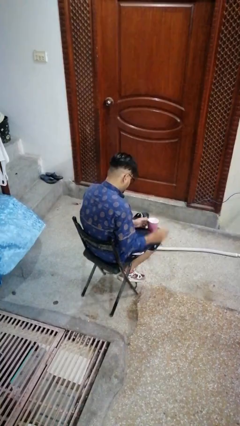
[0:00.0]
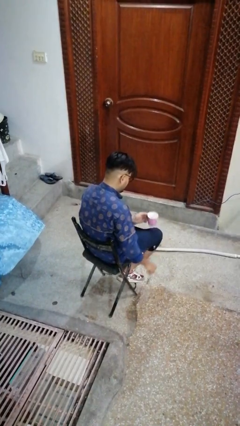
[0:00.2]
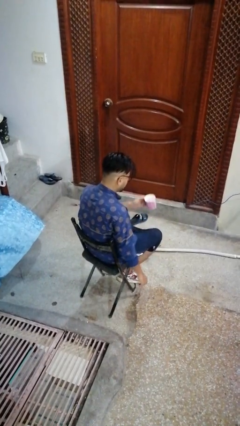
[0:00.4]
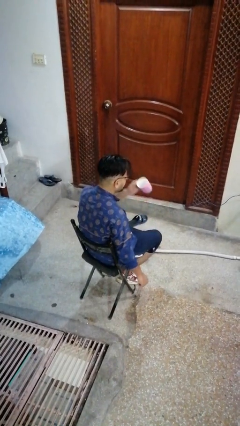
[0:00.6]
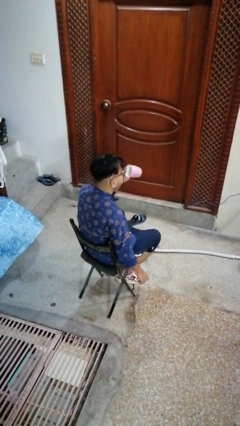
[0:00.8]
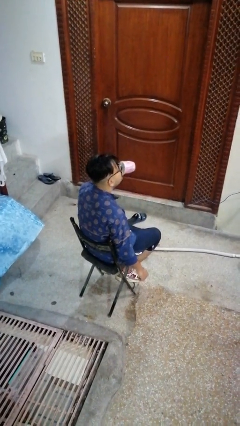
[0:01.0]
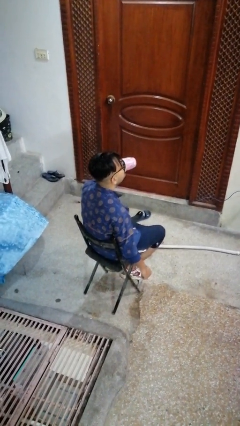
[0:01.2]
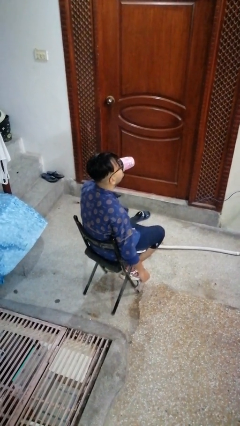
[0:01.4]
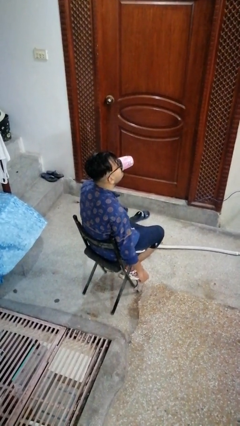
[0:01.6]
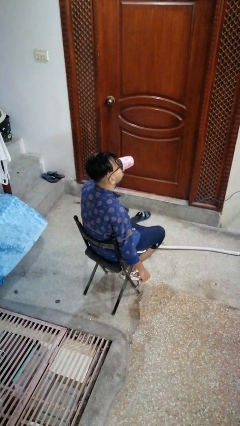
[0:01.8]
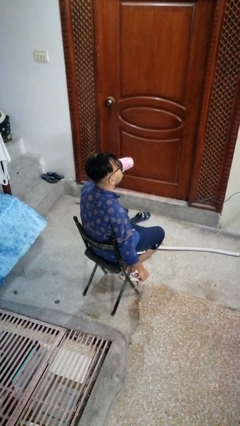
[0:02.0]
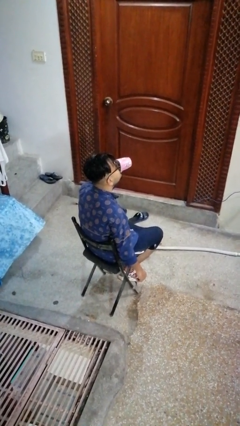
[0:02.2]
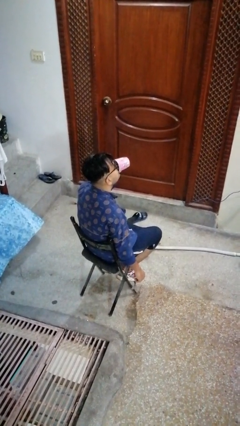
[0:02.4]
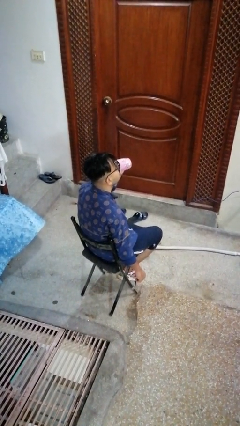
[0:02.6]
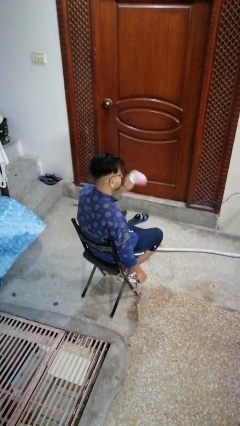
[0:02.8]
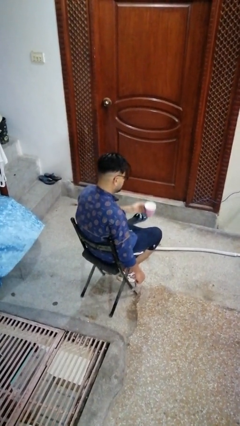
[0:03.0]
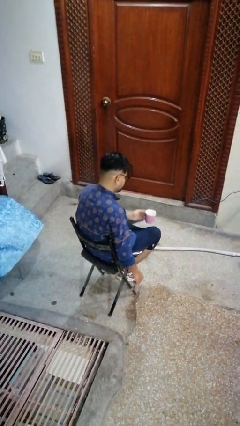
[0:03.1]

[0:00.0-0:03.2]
person drinks from mug

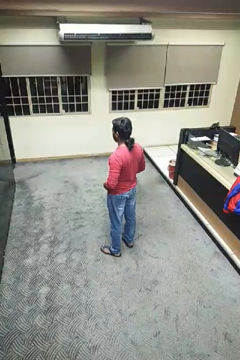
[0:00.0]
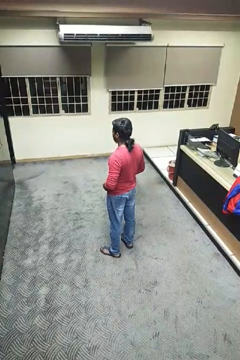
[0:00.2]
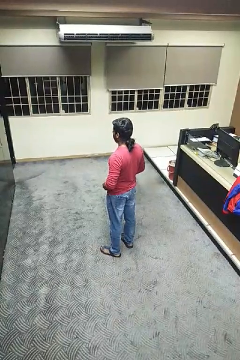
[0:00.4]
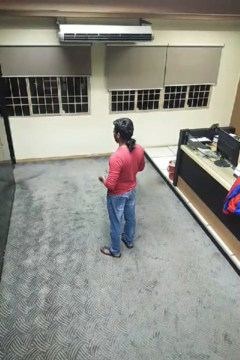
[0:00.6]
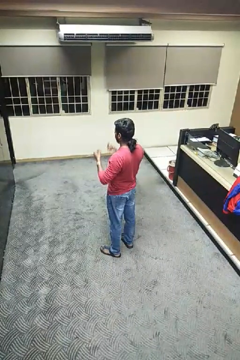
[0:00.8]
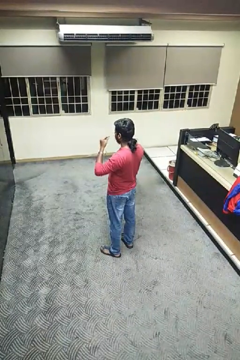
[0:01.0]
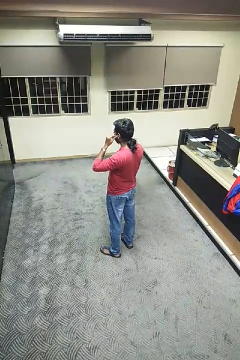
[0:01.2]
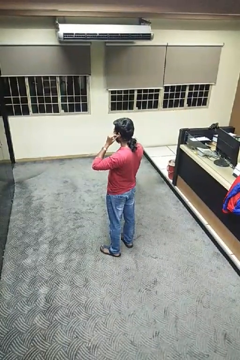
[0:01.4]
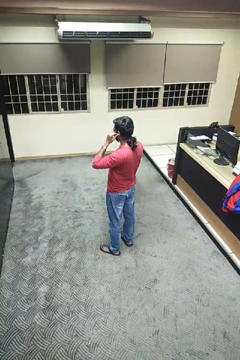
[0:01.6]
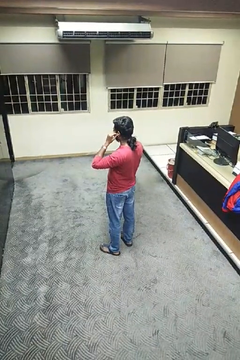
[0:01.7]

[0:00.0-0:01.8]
person puts on headphones

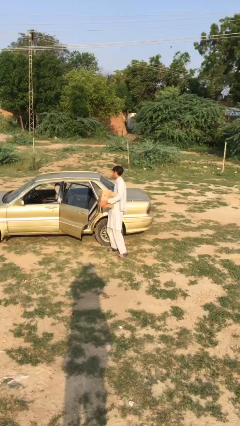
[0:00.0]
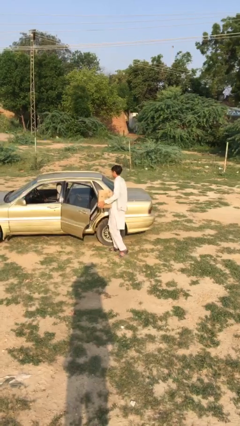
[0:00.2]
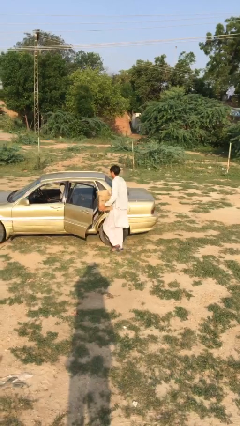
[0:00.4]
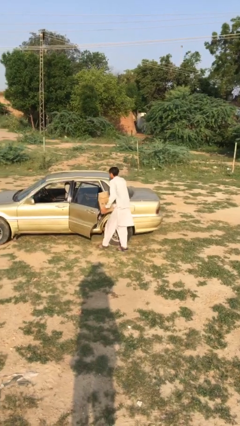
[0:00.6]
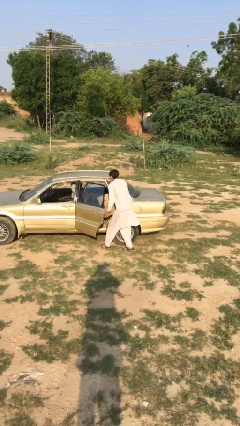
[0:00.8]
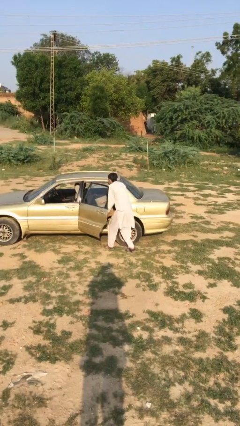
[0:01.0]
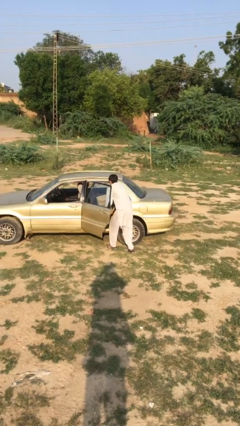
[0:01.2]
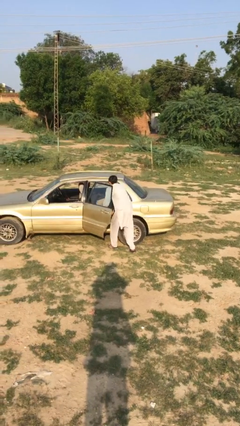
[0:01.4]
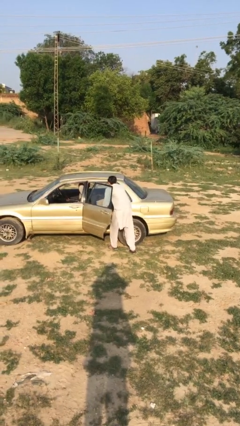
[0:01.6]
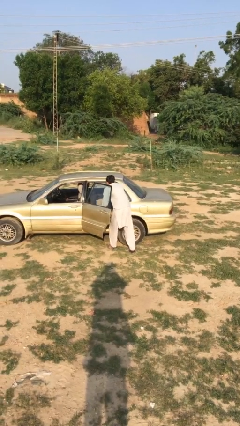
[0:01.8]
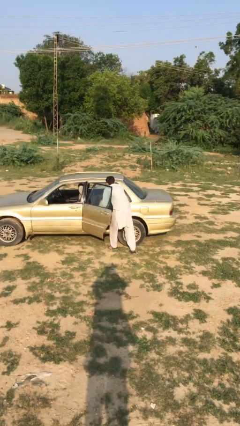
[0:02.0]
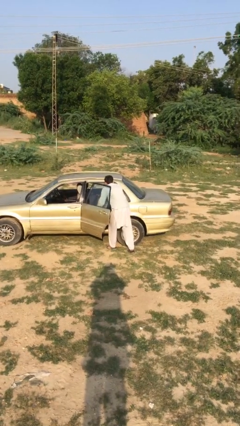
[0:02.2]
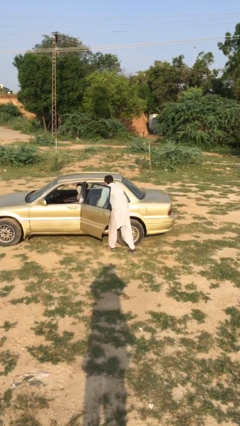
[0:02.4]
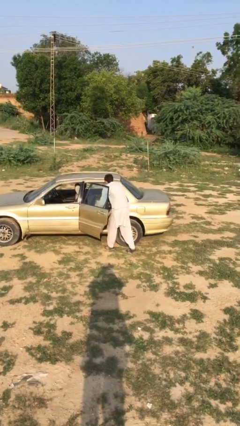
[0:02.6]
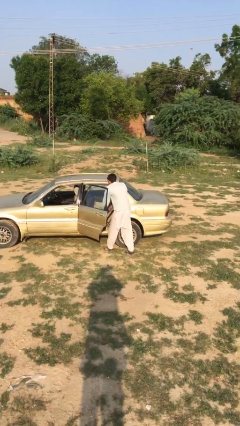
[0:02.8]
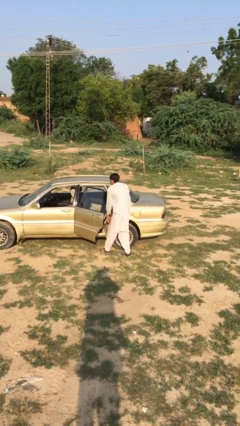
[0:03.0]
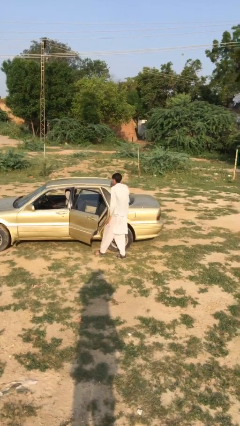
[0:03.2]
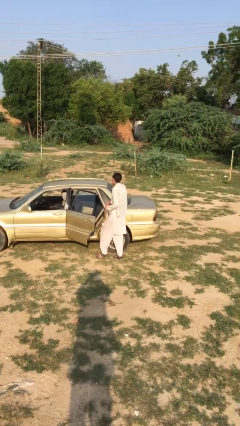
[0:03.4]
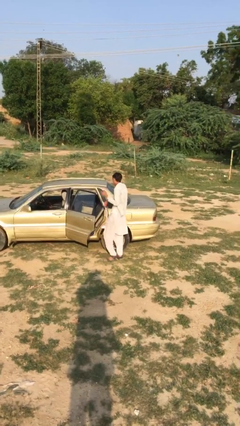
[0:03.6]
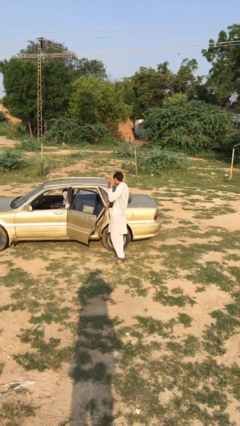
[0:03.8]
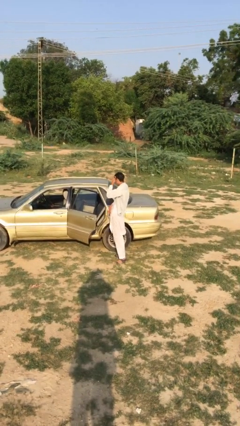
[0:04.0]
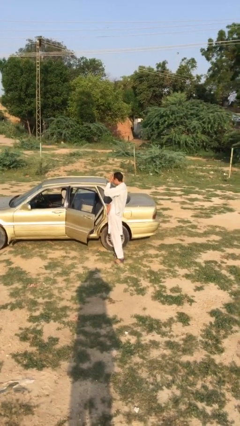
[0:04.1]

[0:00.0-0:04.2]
person loads car

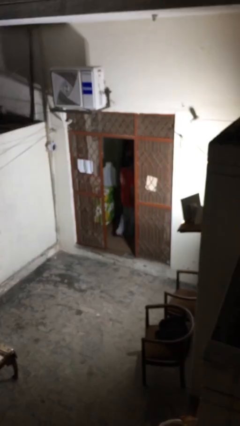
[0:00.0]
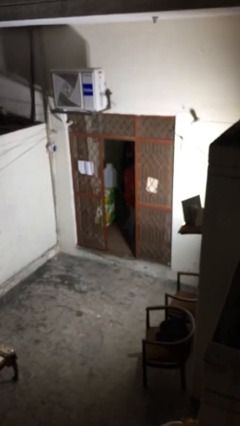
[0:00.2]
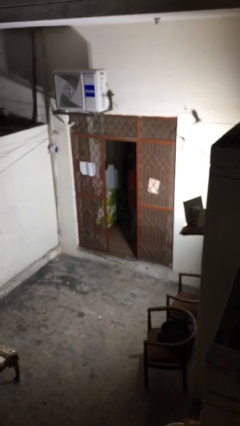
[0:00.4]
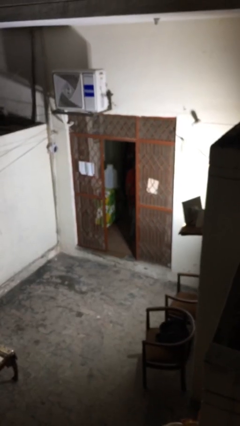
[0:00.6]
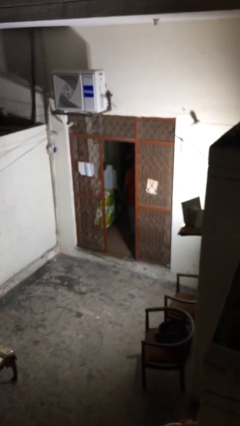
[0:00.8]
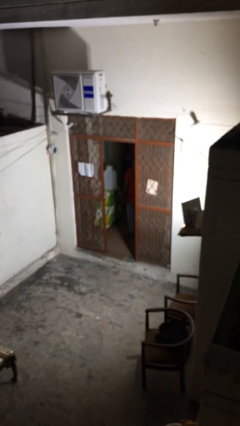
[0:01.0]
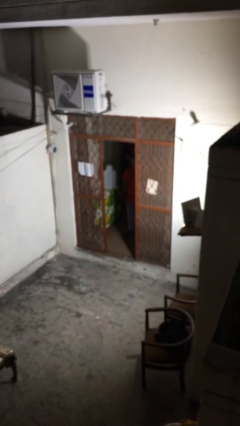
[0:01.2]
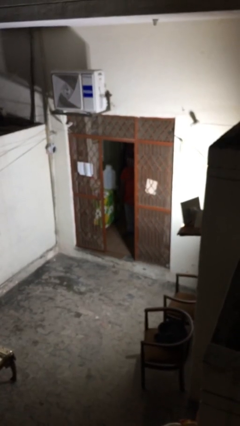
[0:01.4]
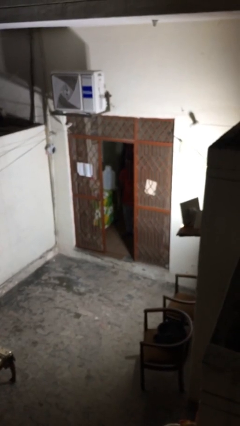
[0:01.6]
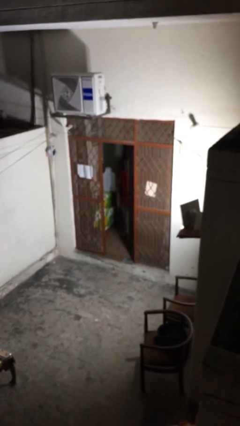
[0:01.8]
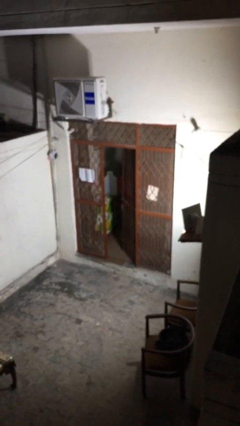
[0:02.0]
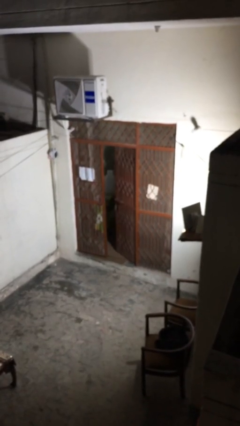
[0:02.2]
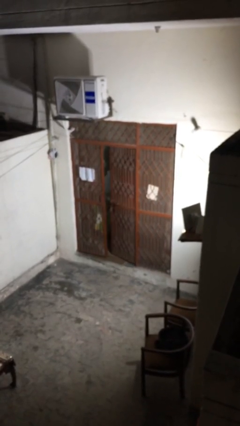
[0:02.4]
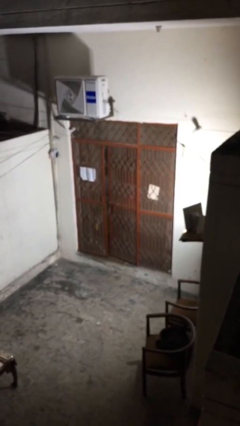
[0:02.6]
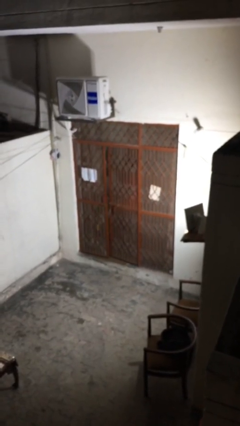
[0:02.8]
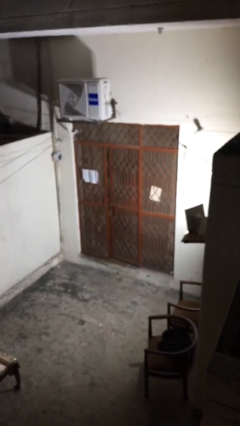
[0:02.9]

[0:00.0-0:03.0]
person closes facility door

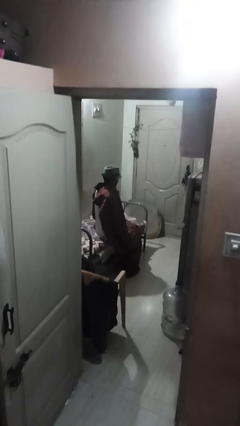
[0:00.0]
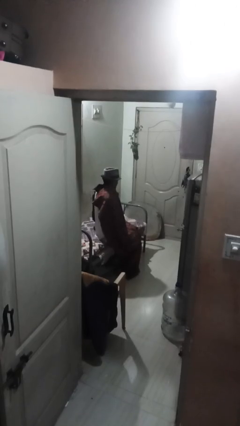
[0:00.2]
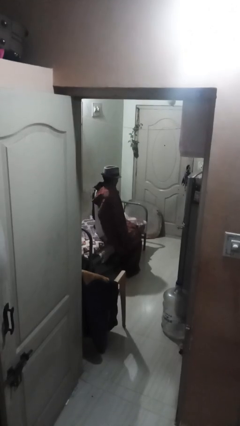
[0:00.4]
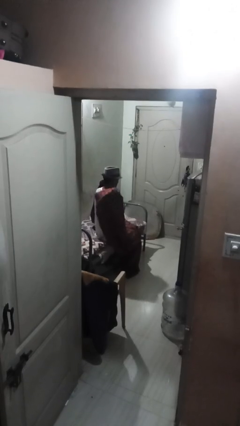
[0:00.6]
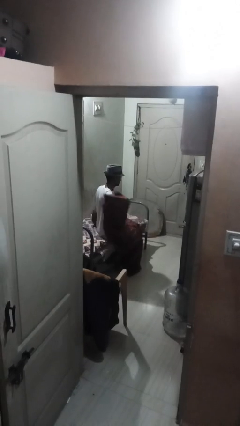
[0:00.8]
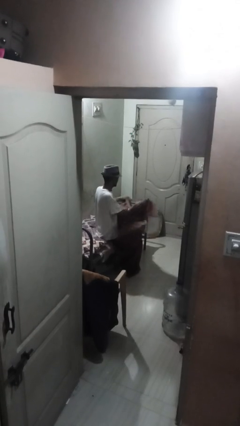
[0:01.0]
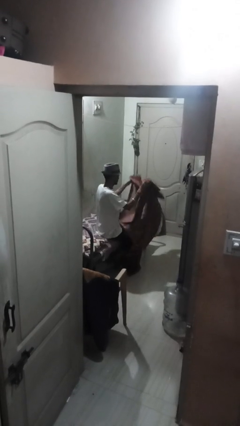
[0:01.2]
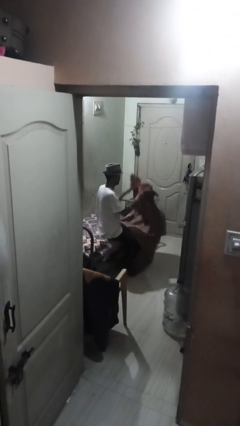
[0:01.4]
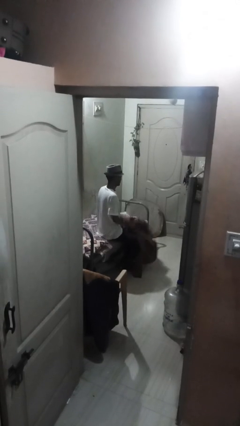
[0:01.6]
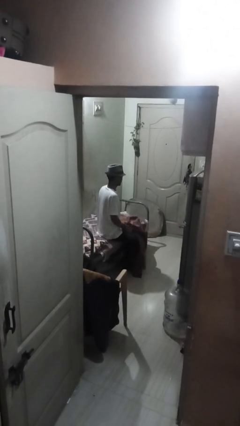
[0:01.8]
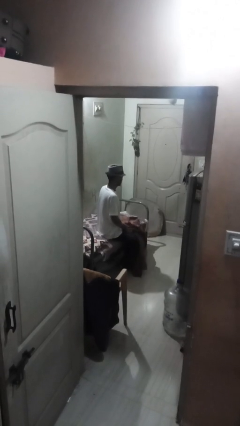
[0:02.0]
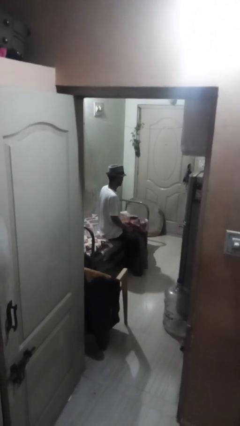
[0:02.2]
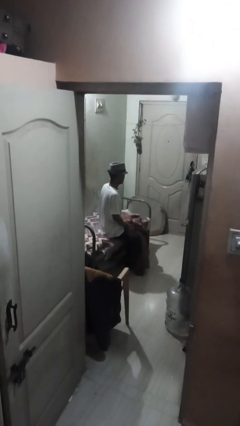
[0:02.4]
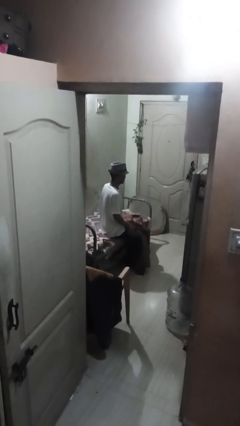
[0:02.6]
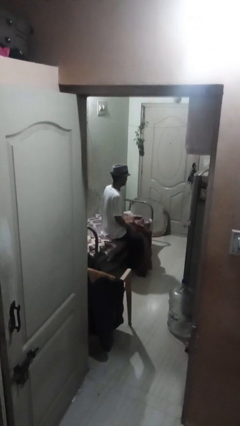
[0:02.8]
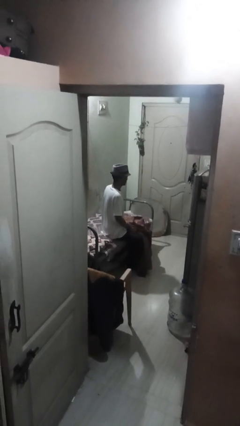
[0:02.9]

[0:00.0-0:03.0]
person uncovers with blanket

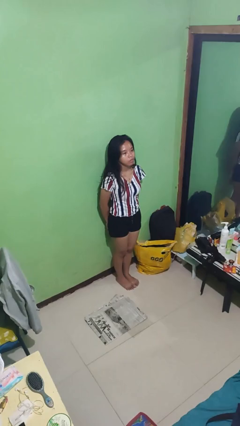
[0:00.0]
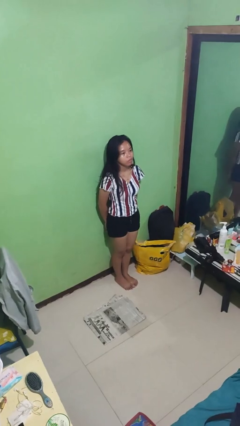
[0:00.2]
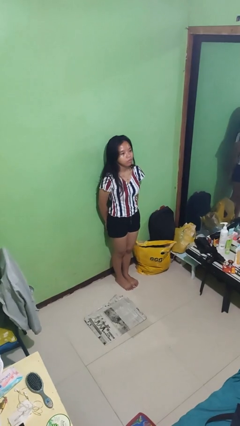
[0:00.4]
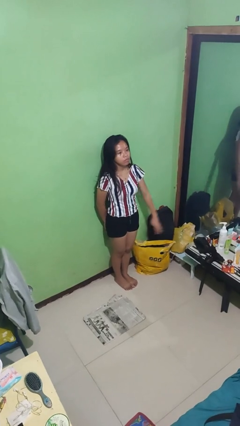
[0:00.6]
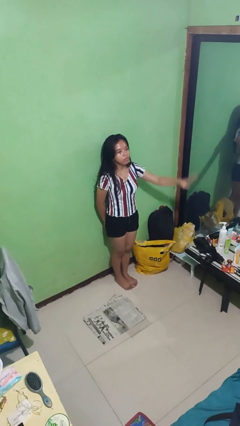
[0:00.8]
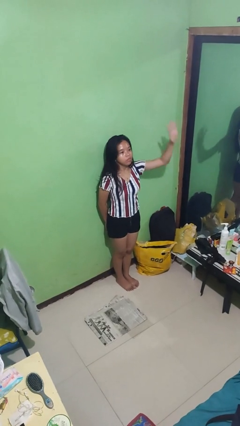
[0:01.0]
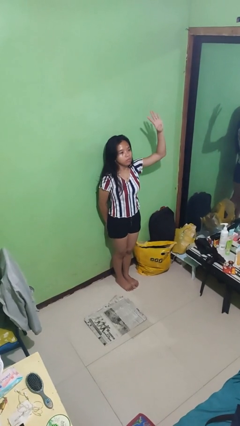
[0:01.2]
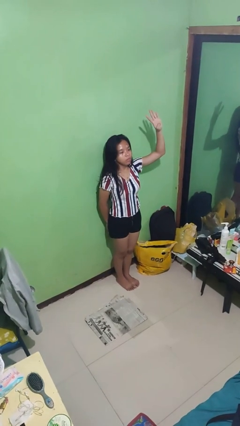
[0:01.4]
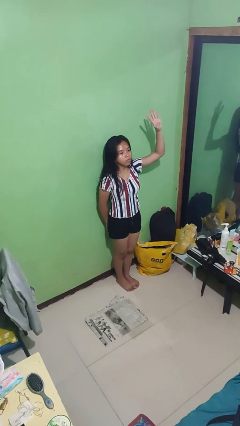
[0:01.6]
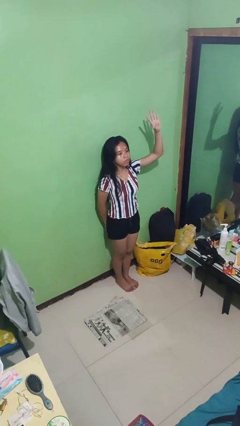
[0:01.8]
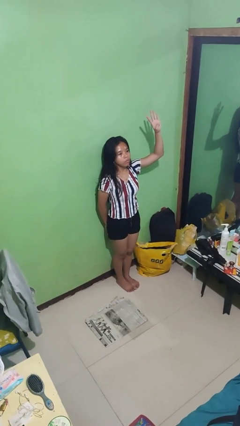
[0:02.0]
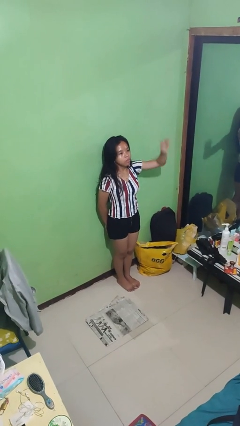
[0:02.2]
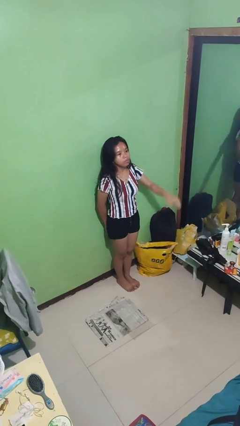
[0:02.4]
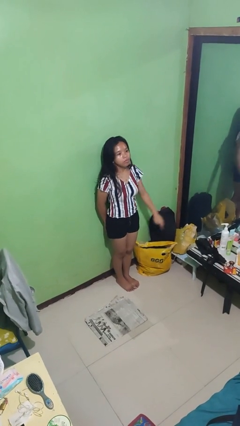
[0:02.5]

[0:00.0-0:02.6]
person gestures number four
